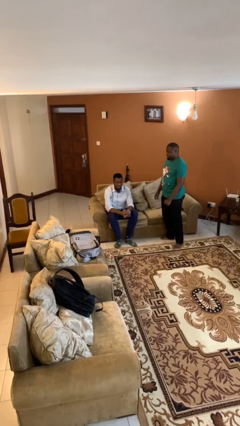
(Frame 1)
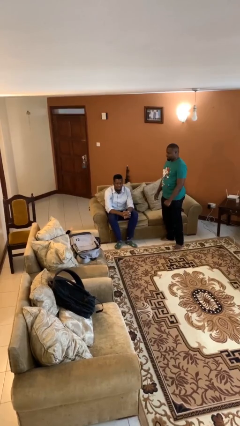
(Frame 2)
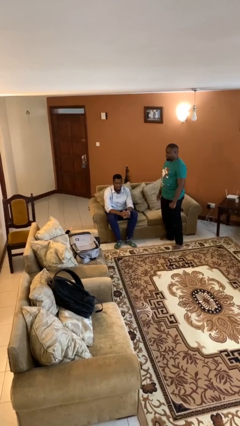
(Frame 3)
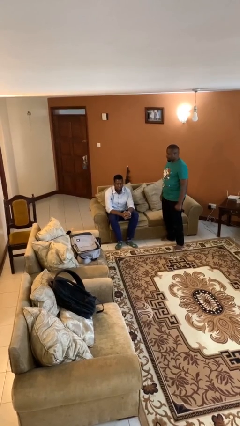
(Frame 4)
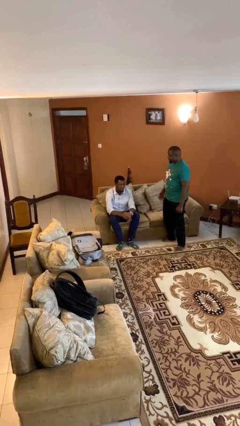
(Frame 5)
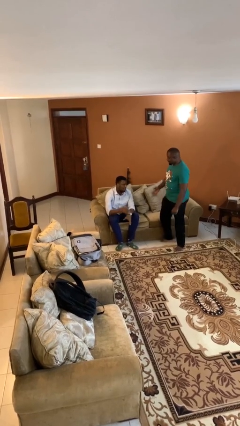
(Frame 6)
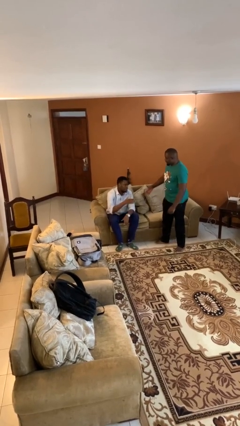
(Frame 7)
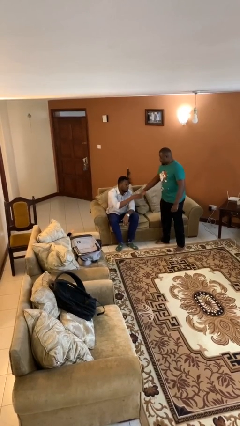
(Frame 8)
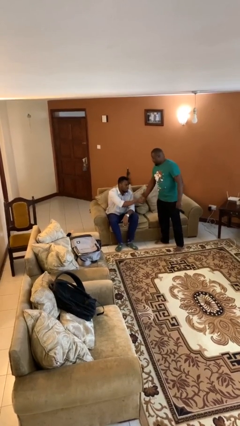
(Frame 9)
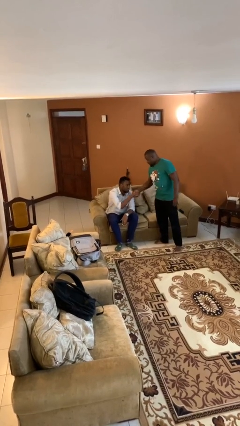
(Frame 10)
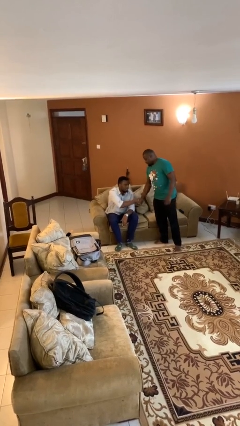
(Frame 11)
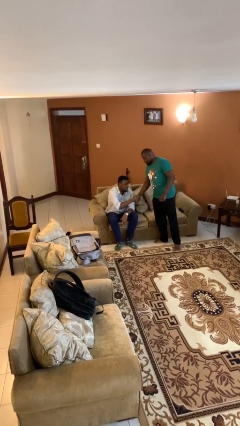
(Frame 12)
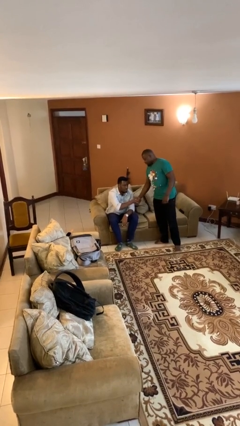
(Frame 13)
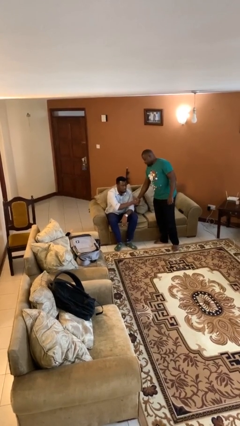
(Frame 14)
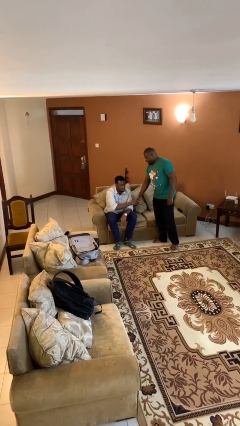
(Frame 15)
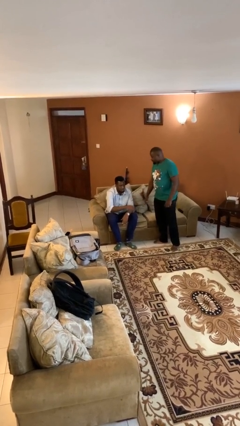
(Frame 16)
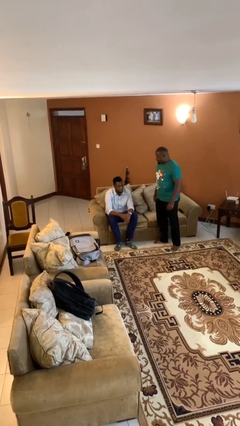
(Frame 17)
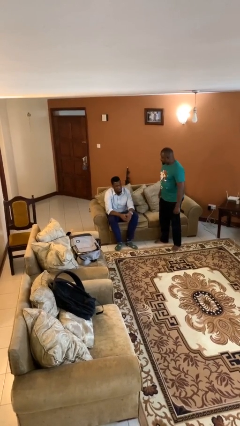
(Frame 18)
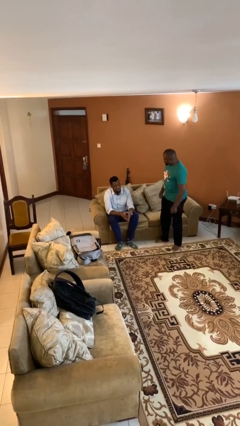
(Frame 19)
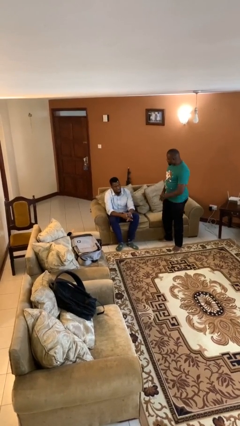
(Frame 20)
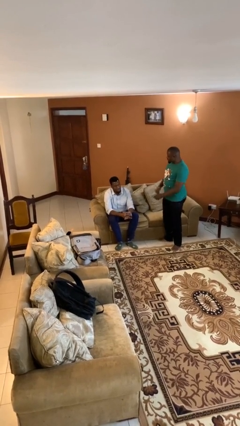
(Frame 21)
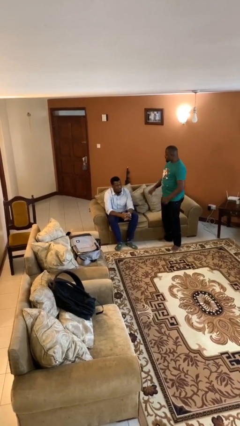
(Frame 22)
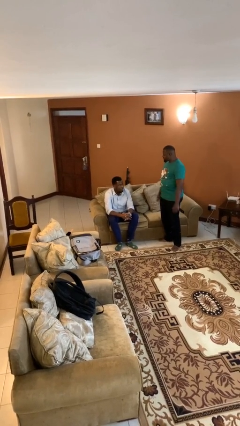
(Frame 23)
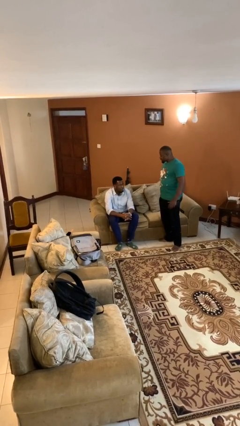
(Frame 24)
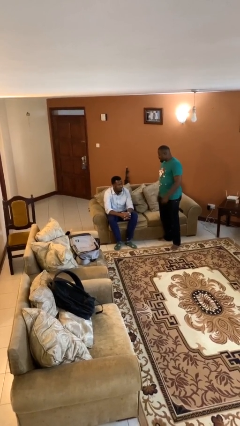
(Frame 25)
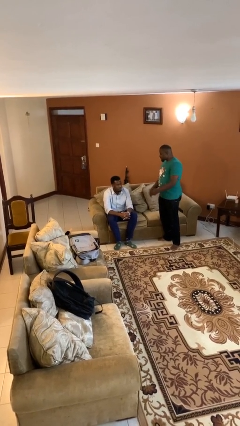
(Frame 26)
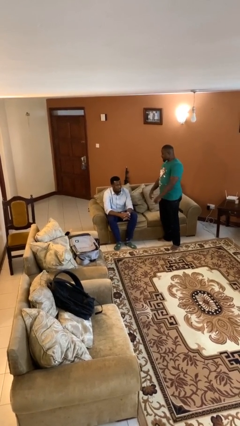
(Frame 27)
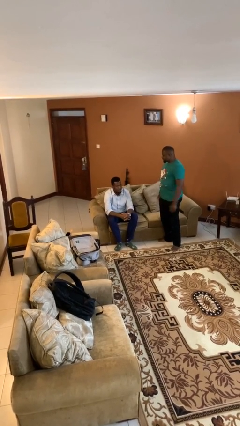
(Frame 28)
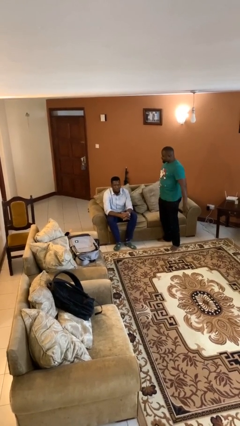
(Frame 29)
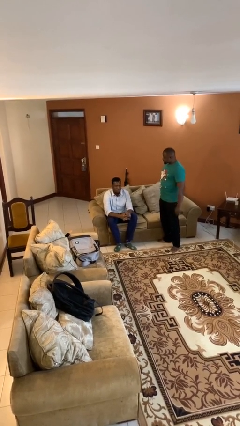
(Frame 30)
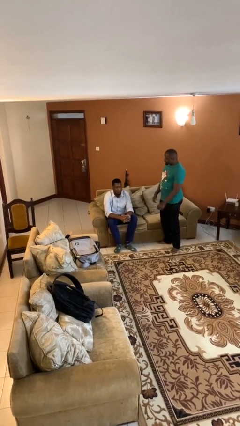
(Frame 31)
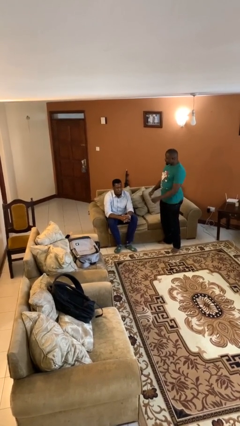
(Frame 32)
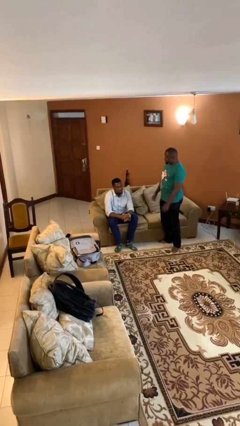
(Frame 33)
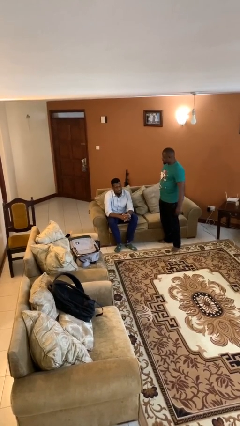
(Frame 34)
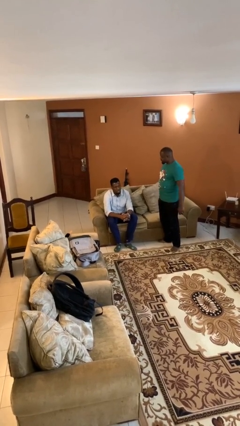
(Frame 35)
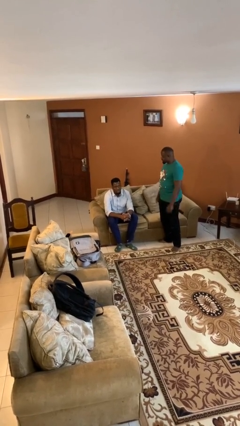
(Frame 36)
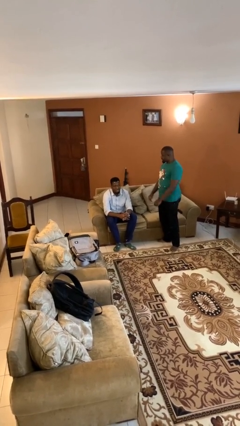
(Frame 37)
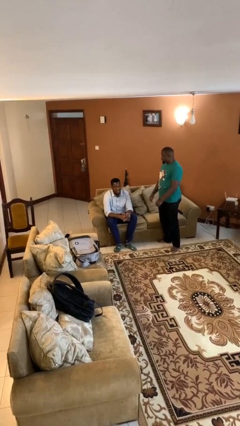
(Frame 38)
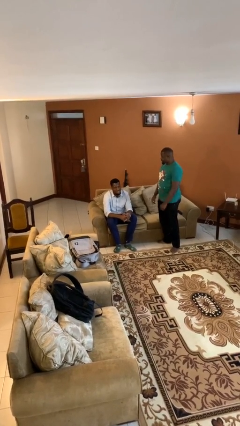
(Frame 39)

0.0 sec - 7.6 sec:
person shakes hand

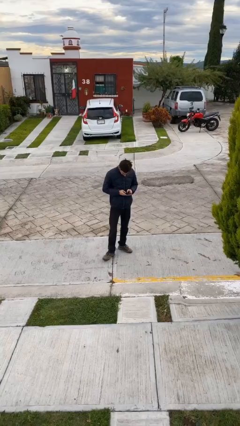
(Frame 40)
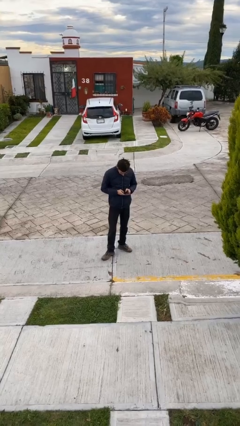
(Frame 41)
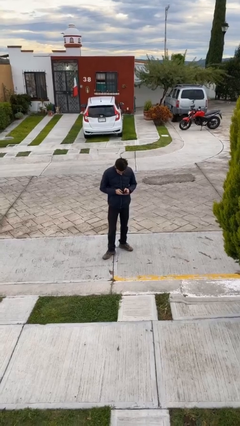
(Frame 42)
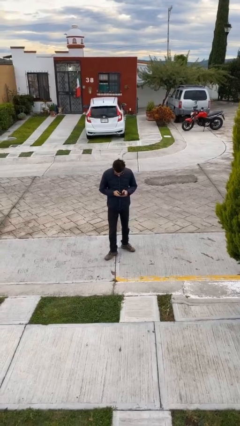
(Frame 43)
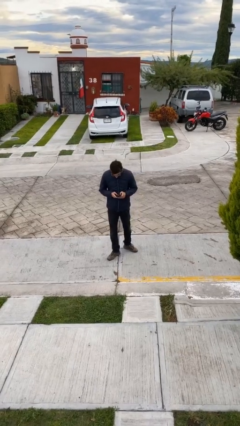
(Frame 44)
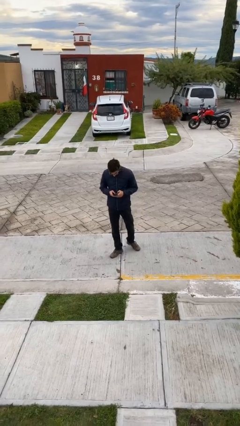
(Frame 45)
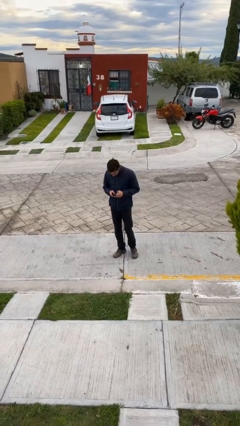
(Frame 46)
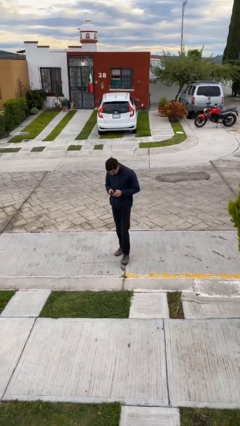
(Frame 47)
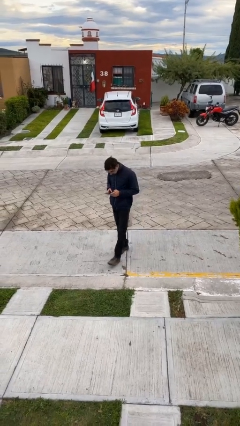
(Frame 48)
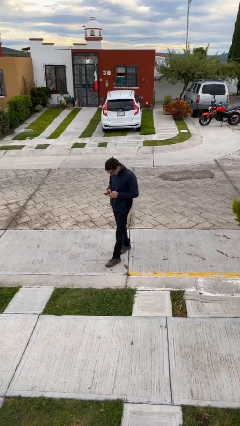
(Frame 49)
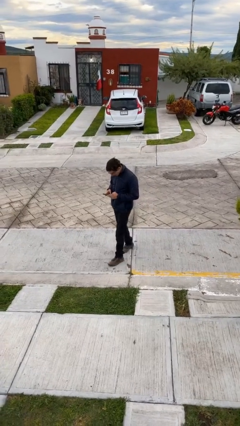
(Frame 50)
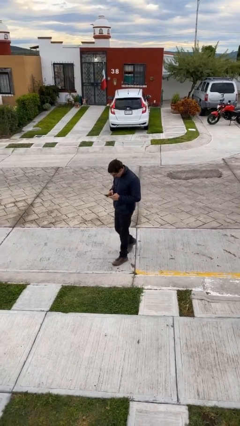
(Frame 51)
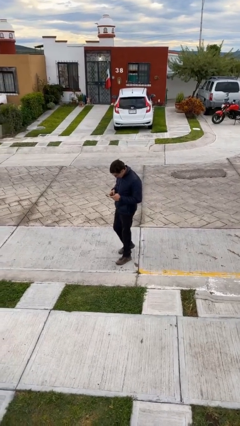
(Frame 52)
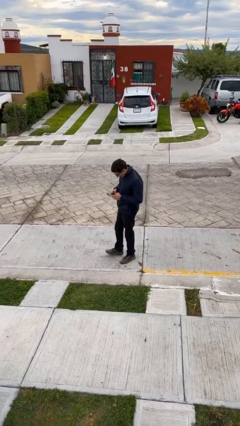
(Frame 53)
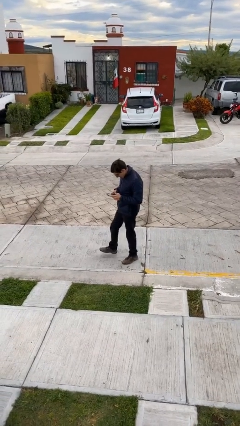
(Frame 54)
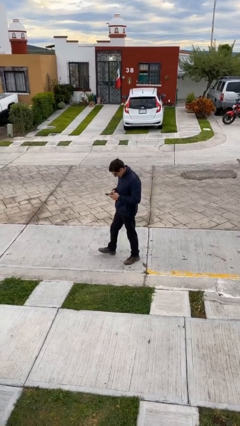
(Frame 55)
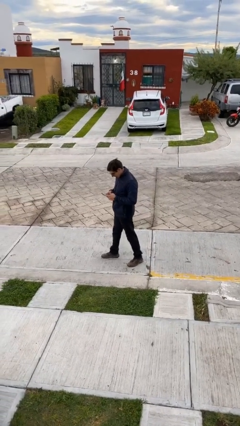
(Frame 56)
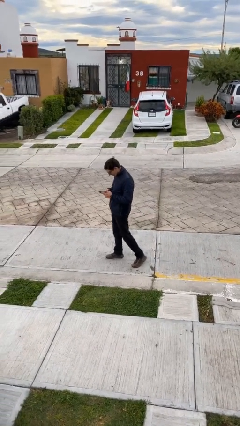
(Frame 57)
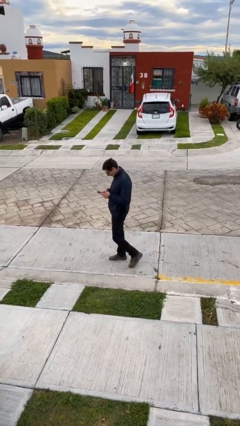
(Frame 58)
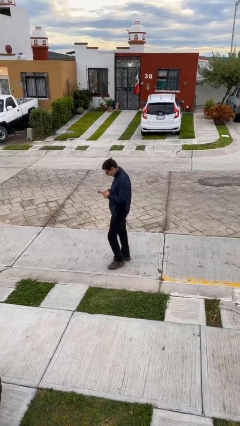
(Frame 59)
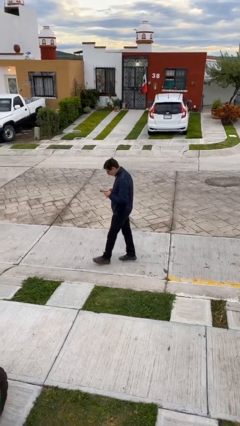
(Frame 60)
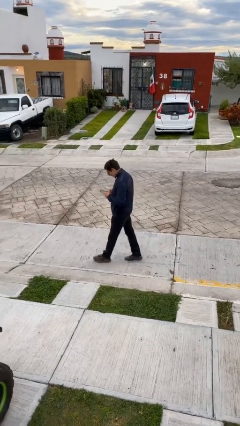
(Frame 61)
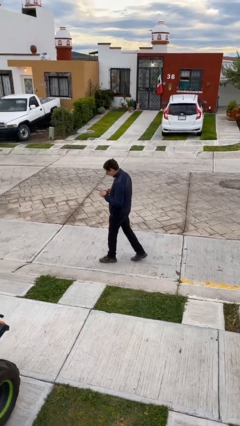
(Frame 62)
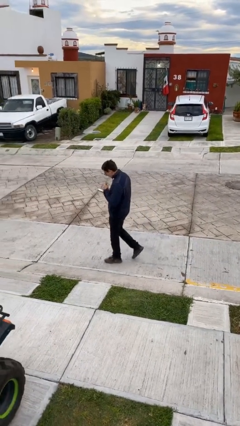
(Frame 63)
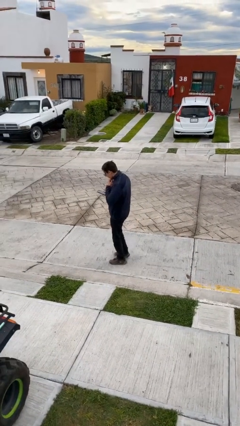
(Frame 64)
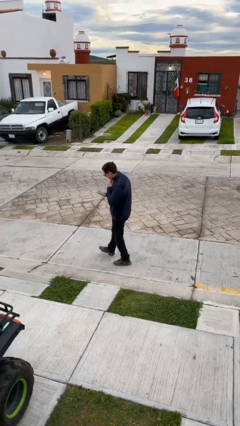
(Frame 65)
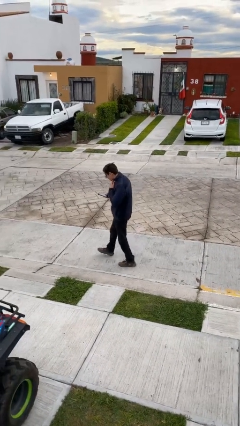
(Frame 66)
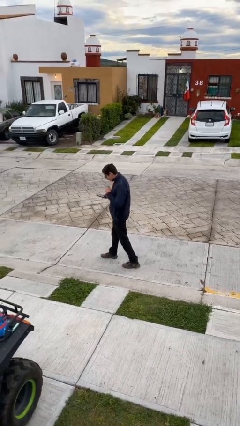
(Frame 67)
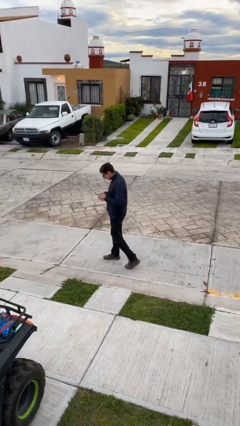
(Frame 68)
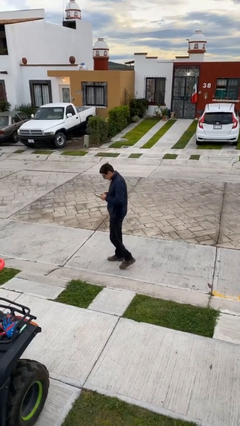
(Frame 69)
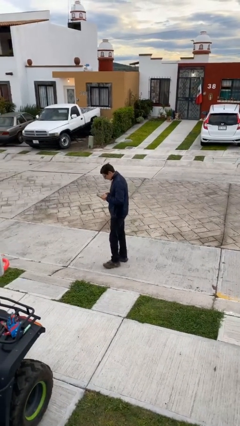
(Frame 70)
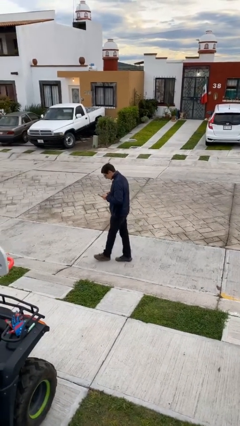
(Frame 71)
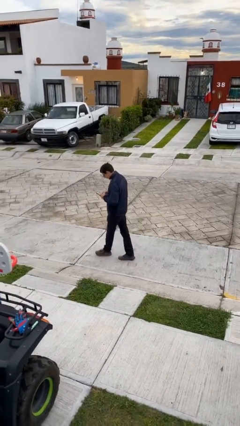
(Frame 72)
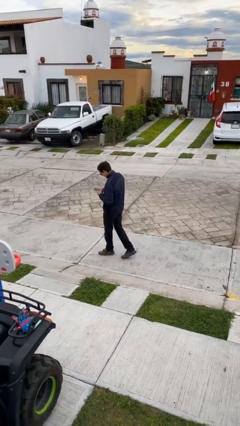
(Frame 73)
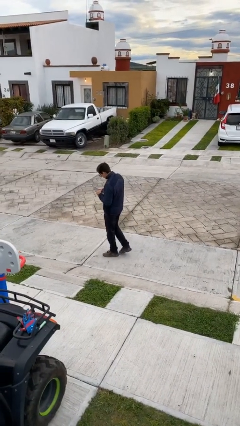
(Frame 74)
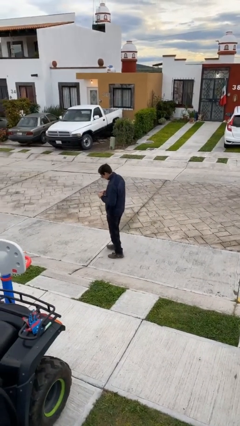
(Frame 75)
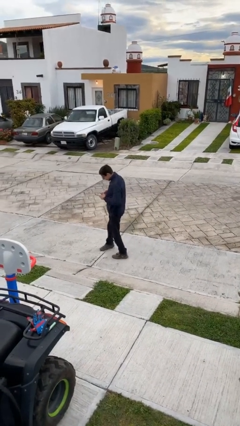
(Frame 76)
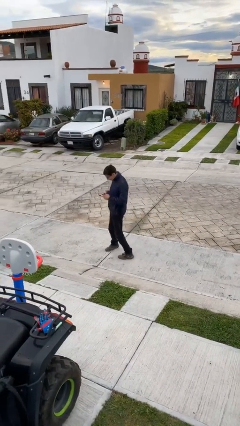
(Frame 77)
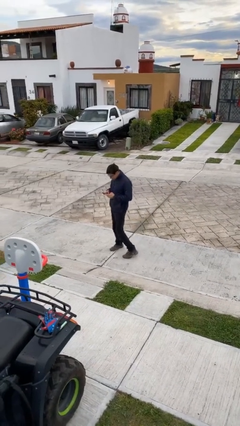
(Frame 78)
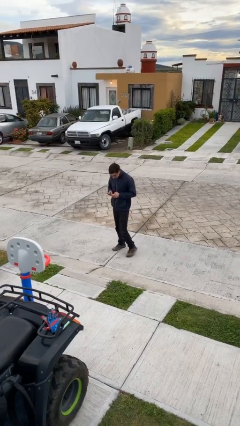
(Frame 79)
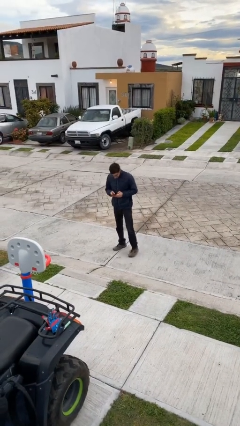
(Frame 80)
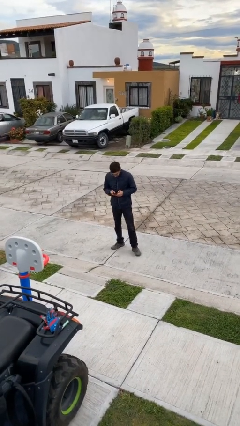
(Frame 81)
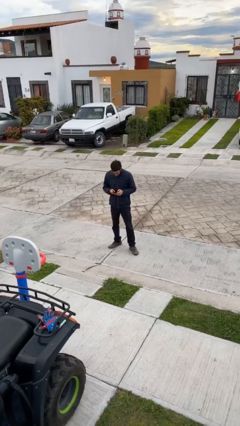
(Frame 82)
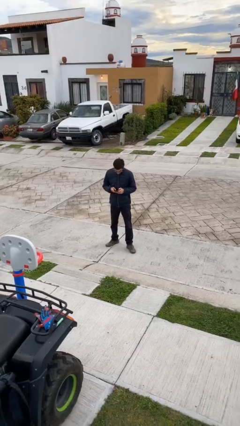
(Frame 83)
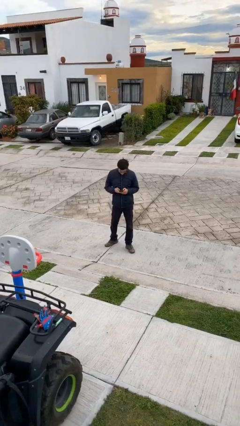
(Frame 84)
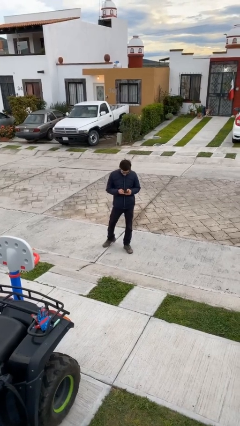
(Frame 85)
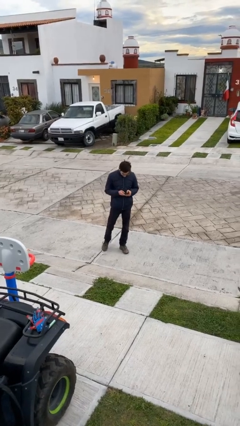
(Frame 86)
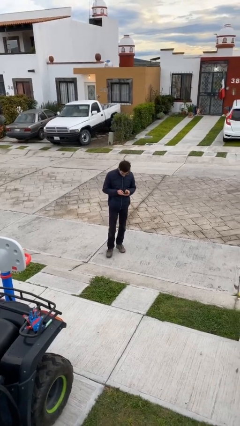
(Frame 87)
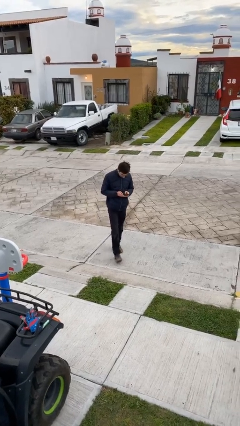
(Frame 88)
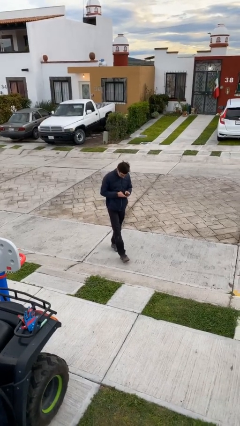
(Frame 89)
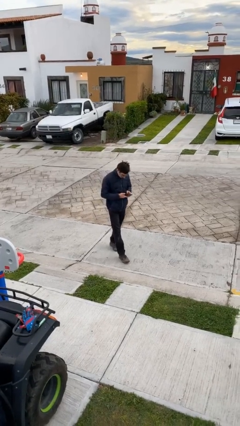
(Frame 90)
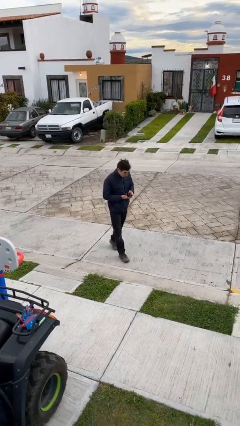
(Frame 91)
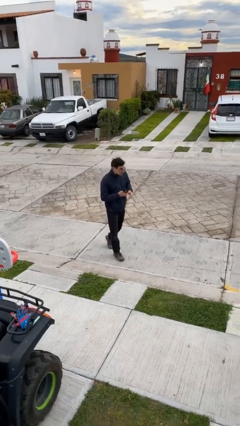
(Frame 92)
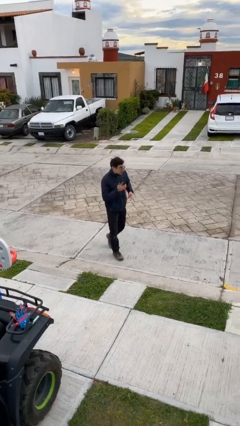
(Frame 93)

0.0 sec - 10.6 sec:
person texts on phone
